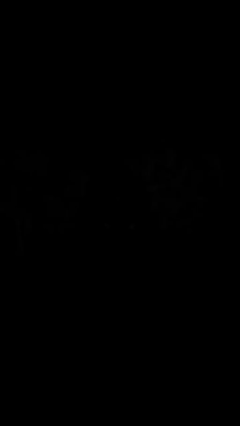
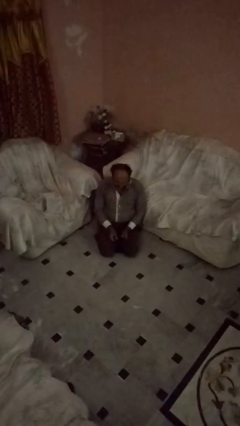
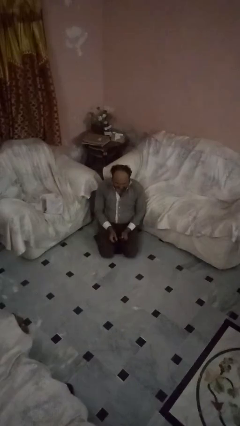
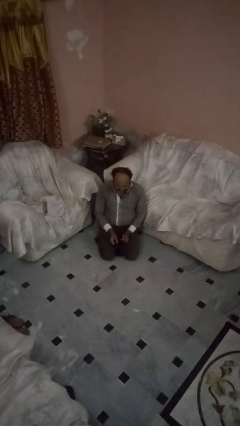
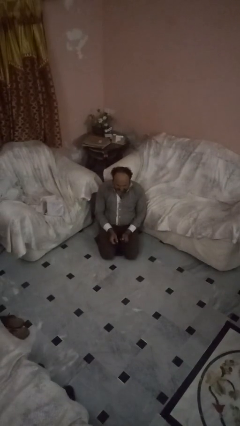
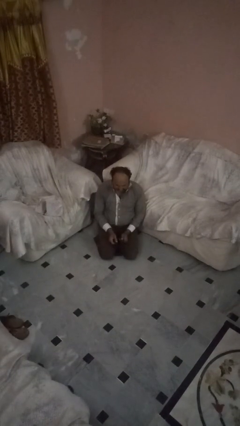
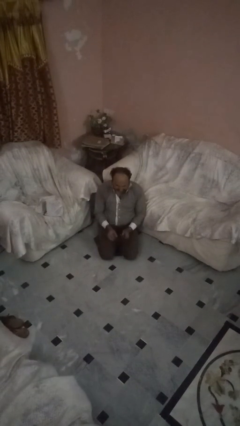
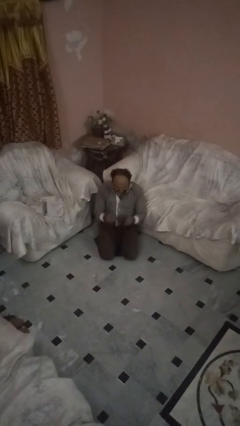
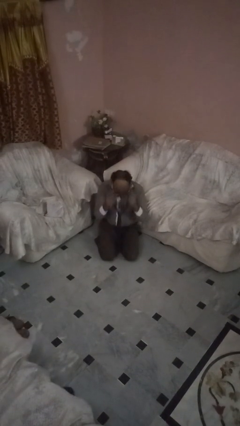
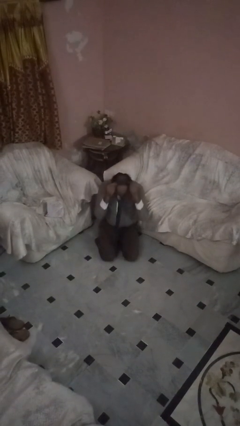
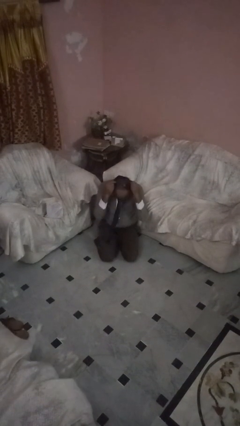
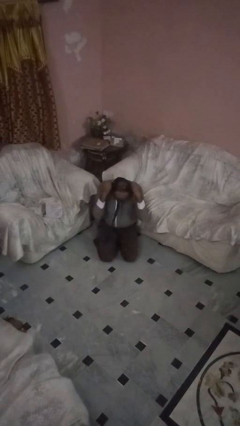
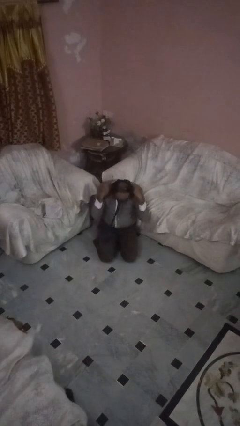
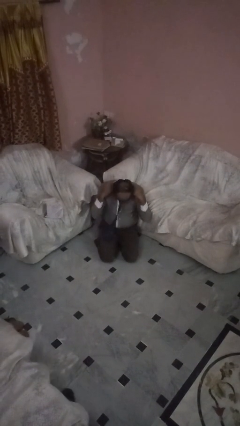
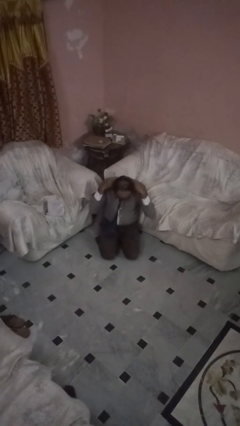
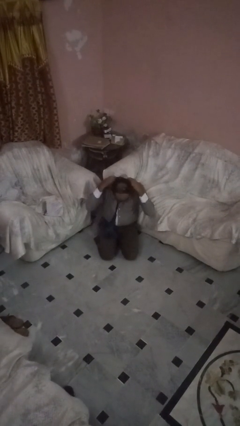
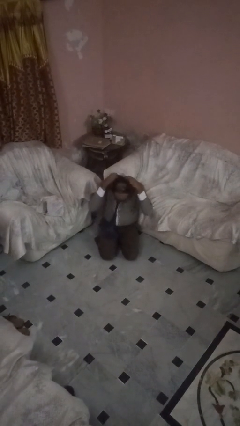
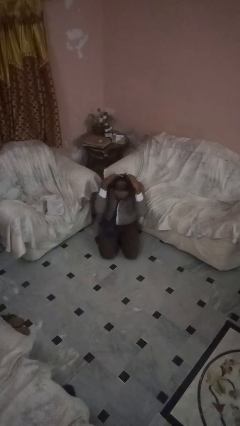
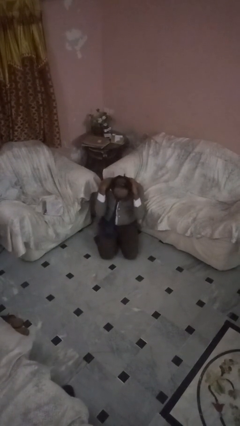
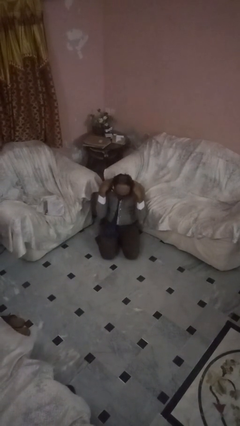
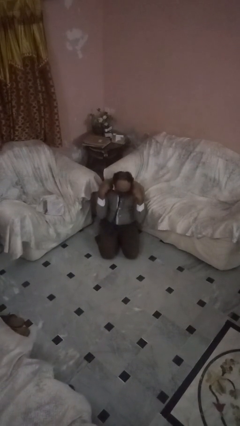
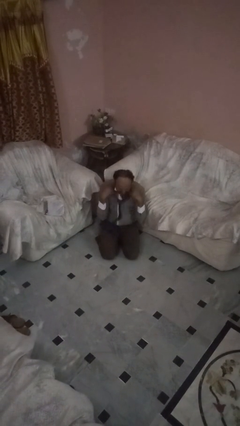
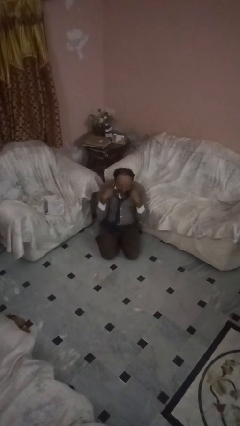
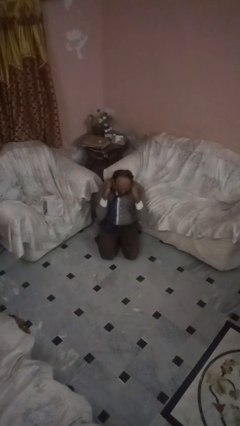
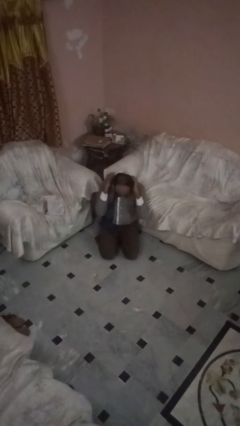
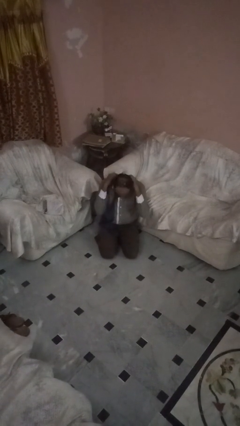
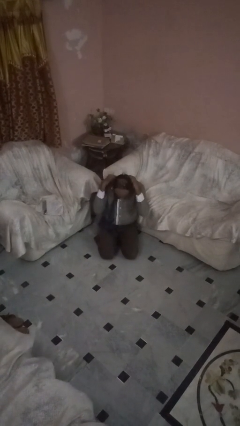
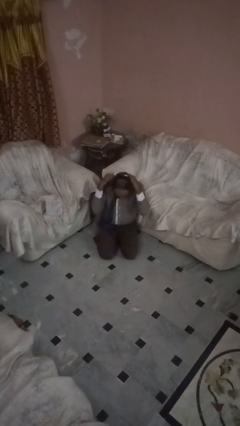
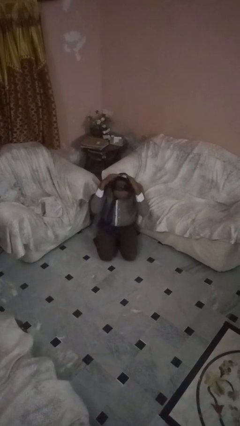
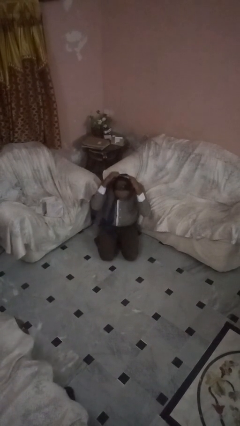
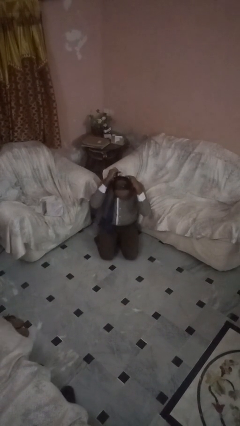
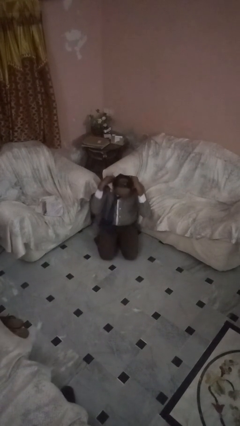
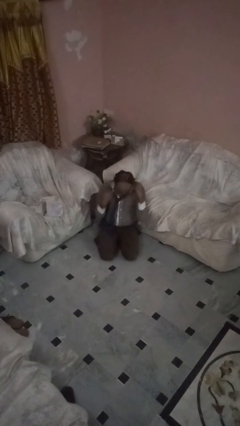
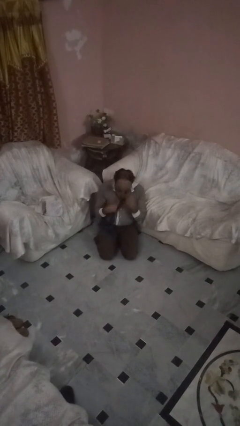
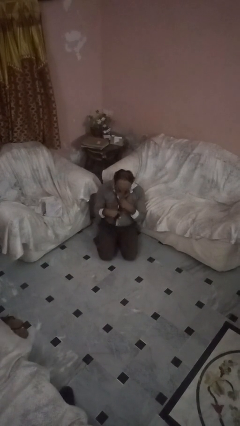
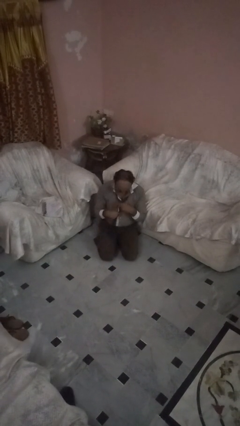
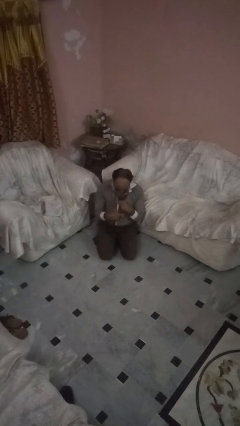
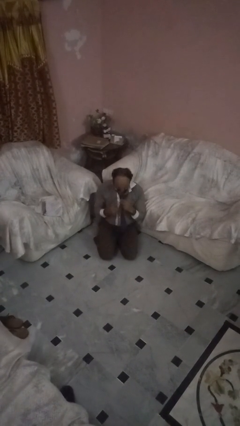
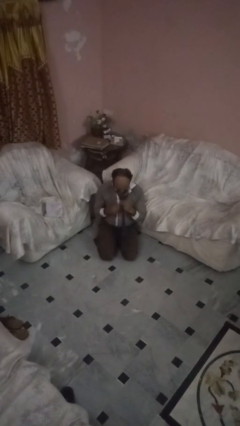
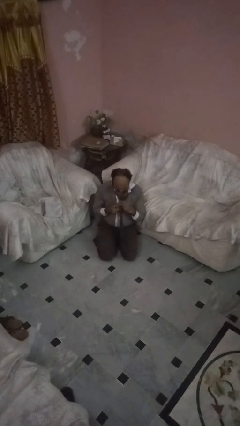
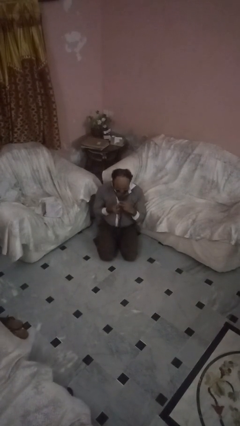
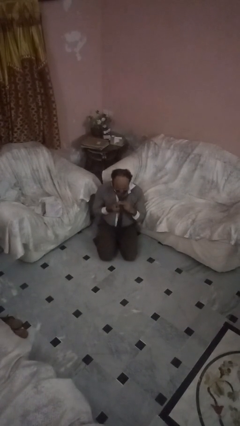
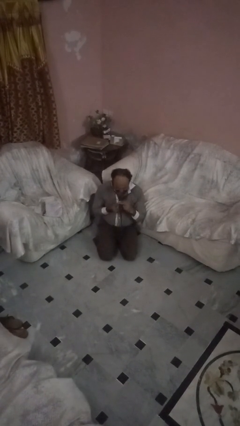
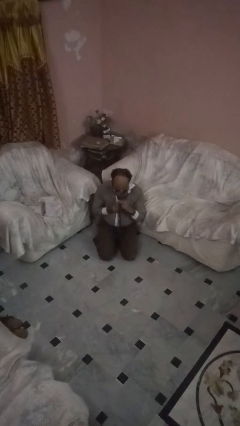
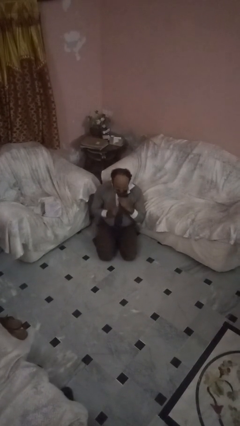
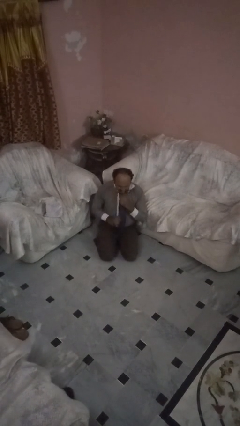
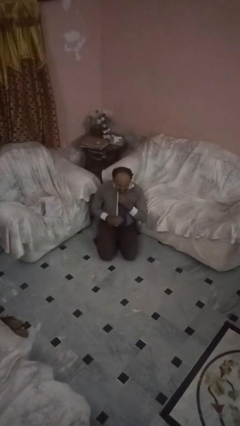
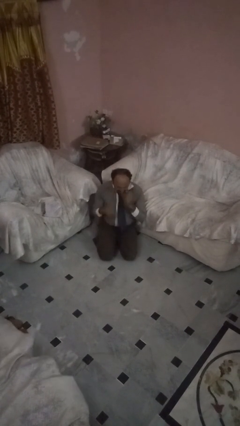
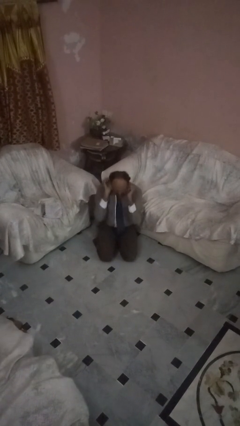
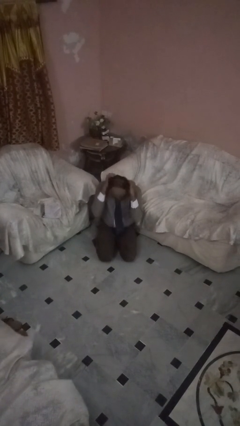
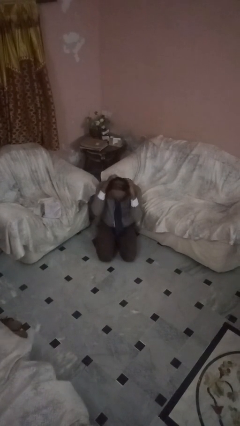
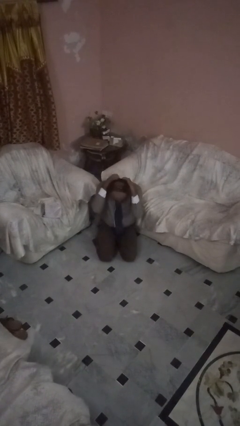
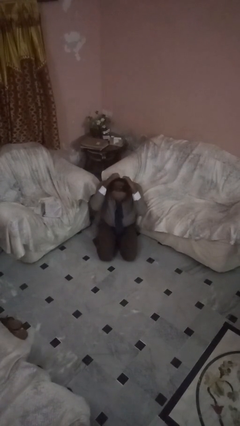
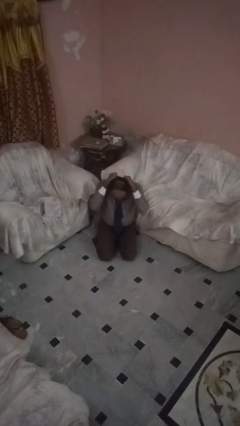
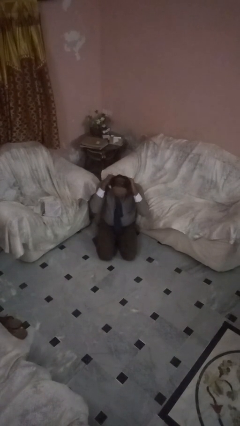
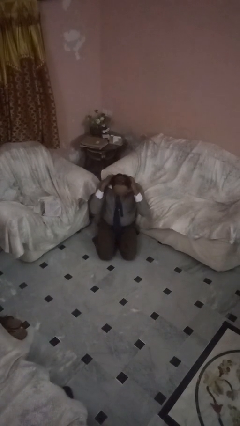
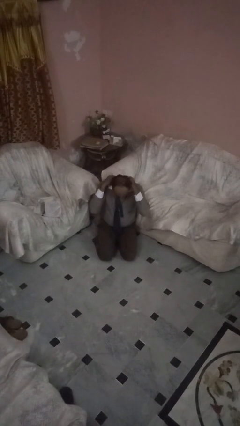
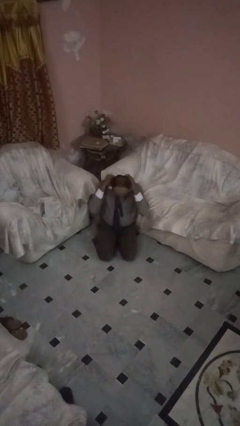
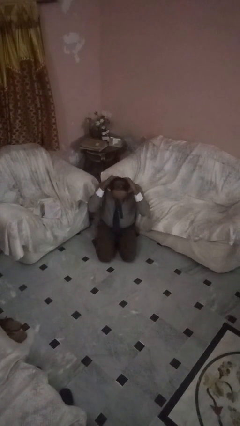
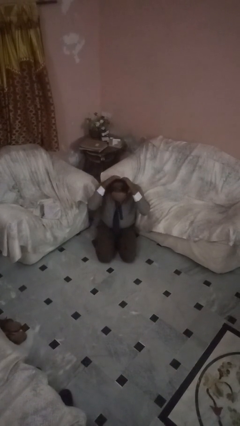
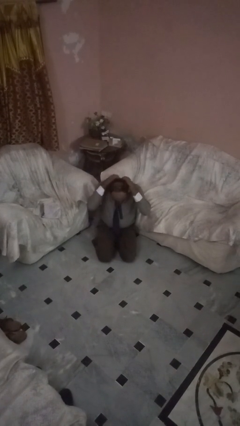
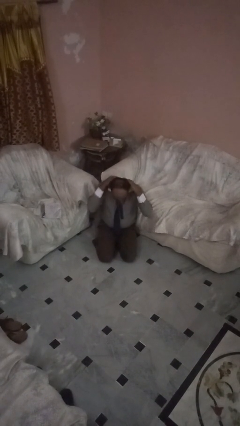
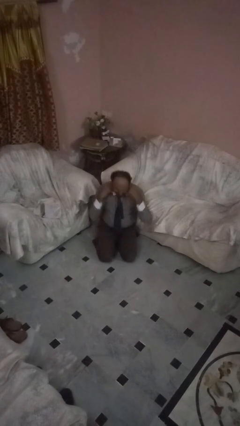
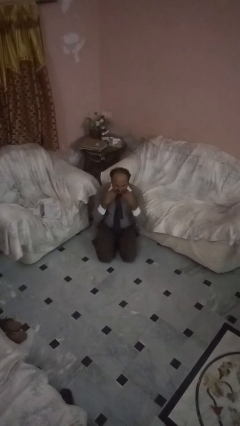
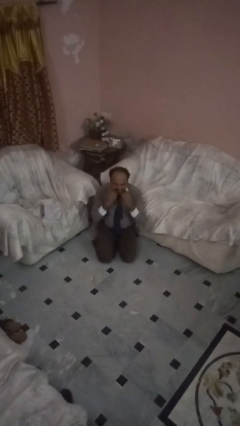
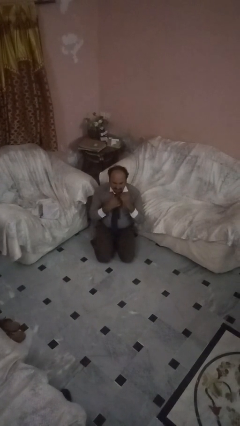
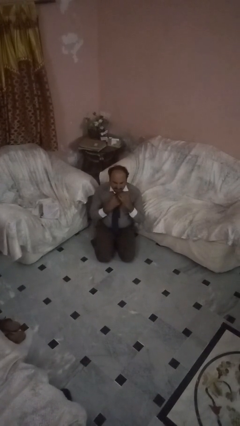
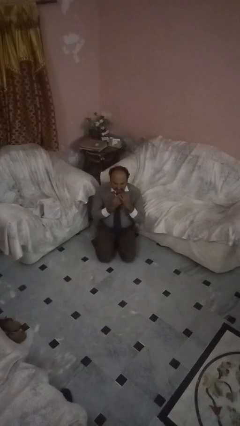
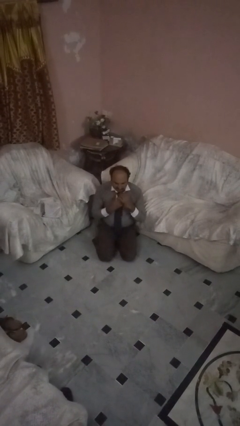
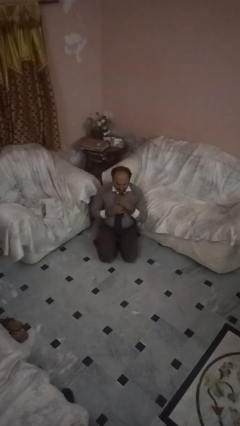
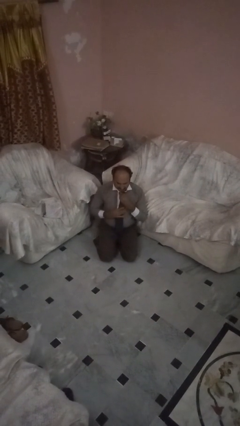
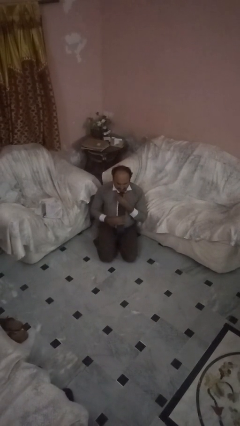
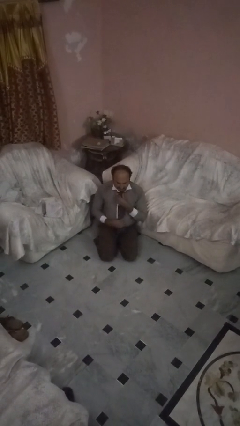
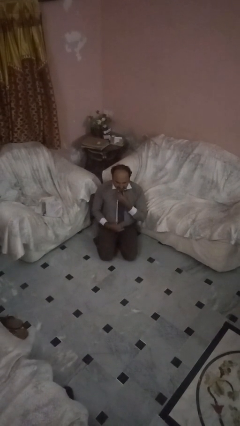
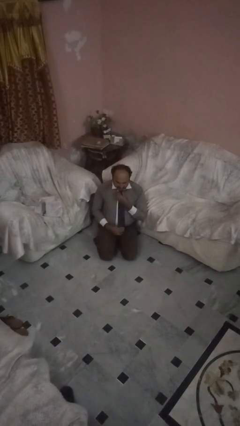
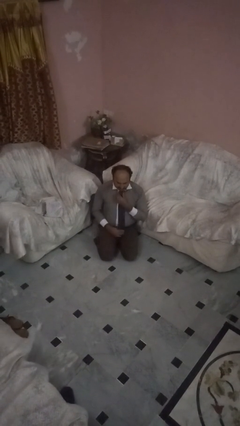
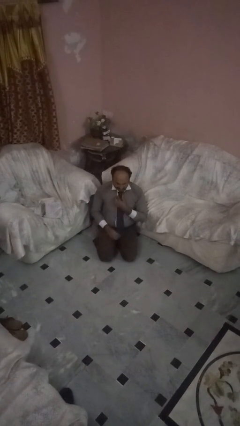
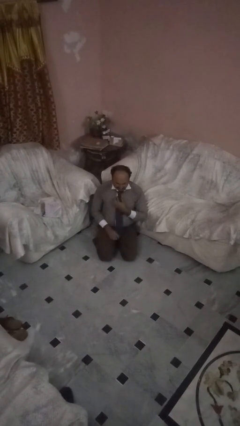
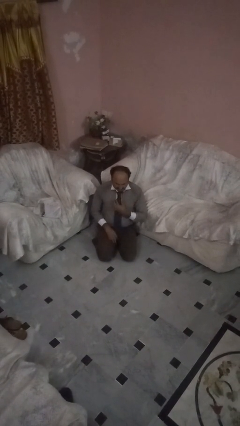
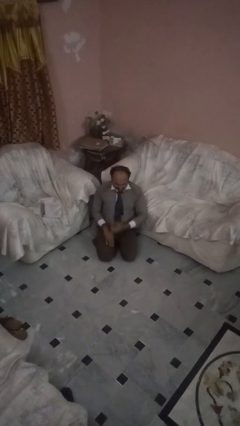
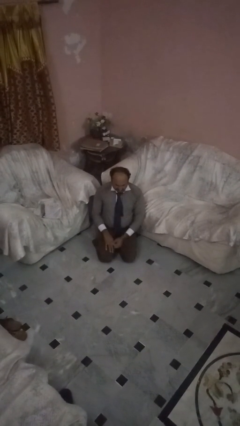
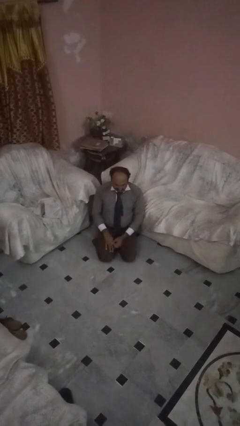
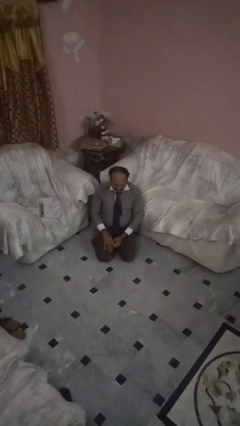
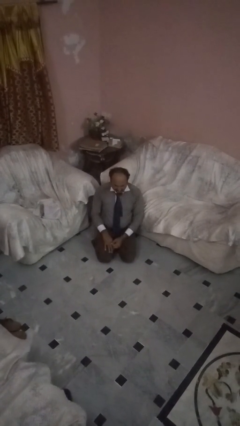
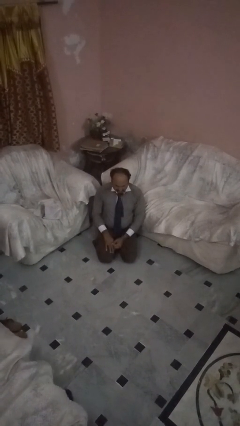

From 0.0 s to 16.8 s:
person puts on necktie

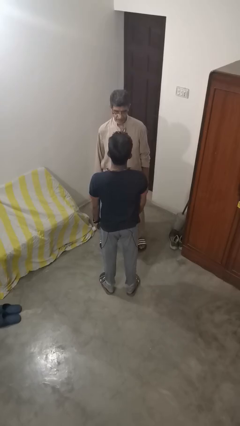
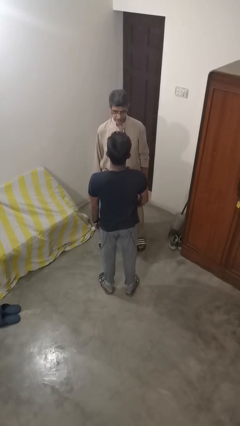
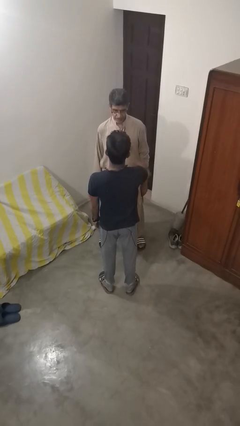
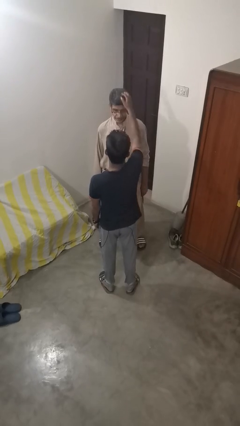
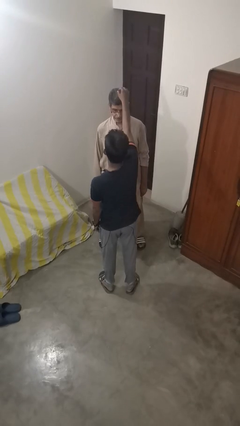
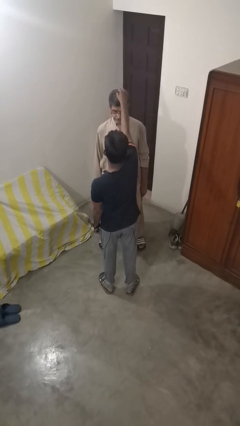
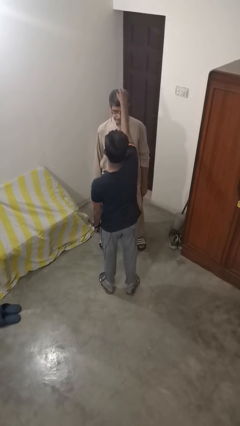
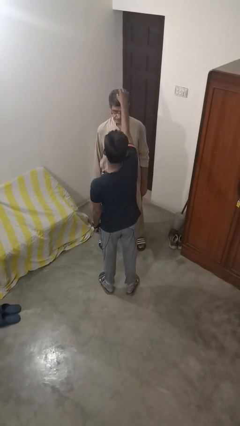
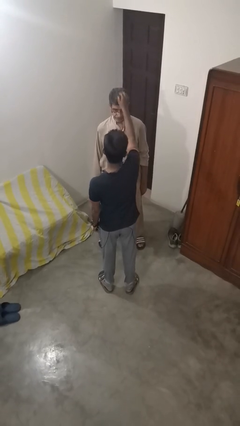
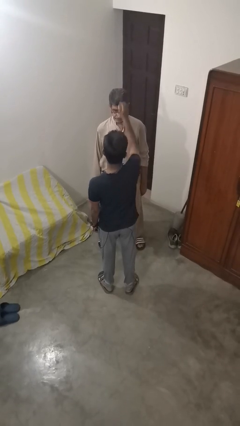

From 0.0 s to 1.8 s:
person grabs person by hair
